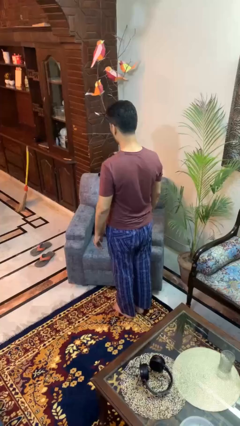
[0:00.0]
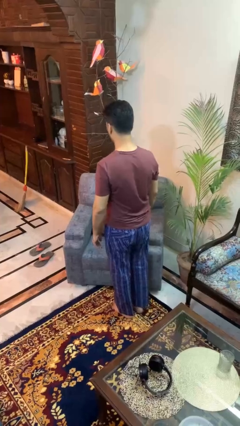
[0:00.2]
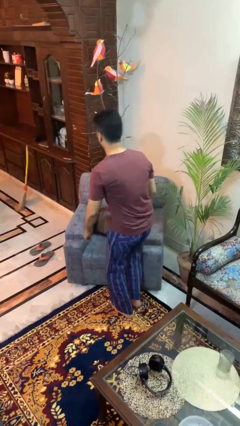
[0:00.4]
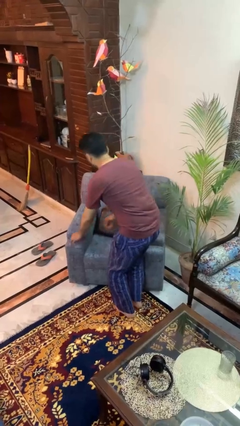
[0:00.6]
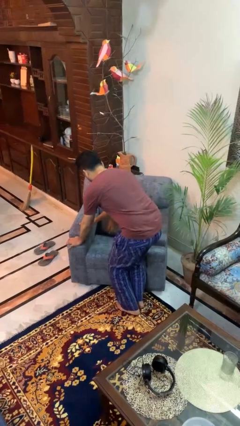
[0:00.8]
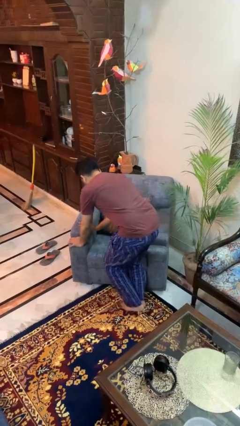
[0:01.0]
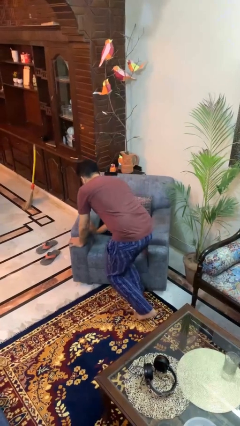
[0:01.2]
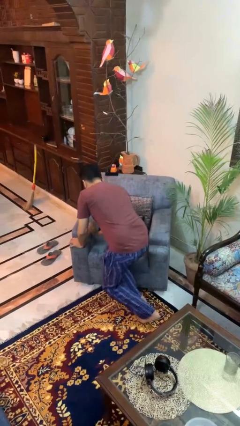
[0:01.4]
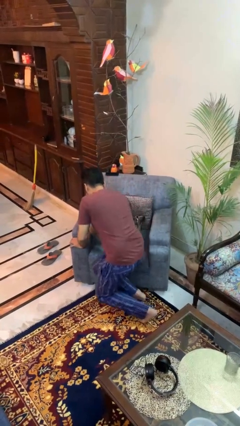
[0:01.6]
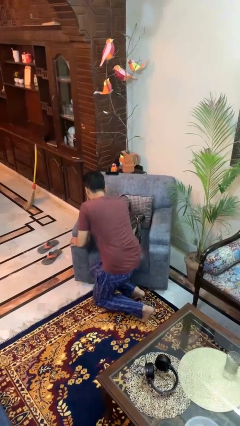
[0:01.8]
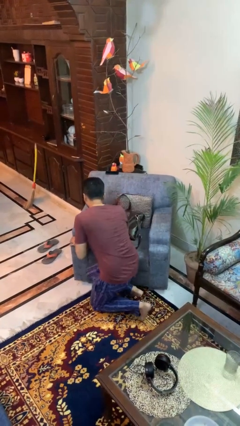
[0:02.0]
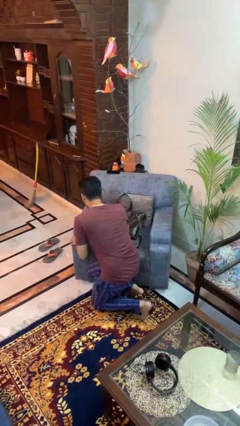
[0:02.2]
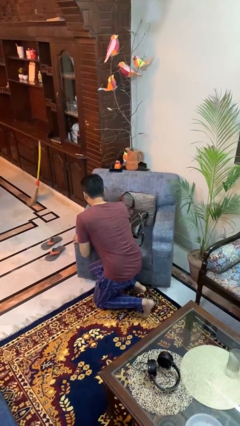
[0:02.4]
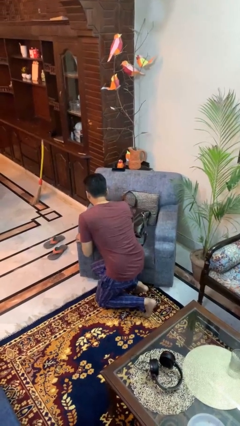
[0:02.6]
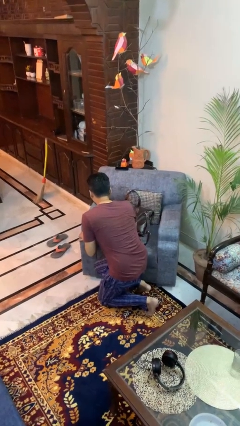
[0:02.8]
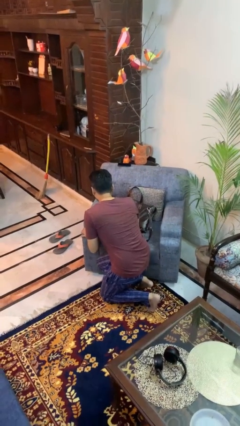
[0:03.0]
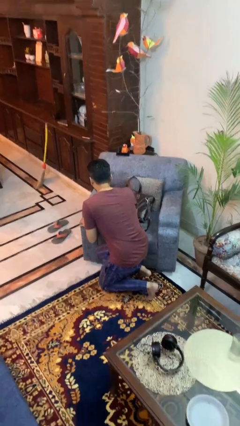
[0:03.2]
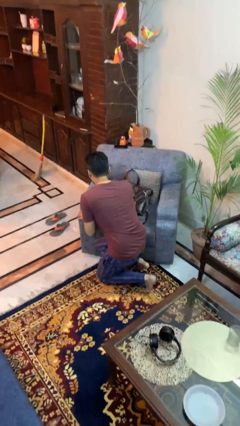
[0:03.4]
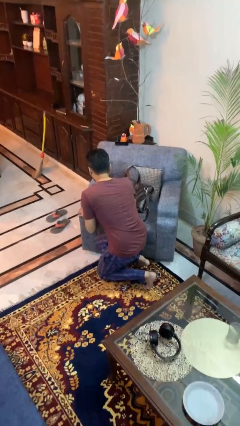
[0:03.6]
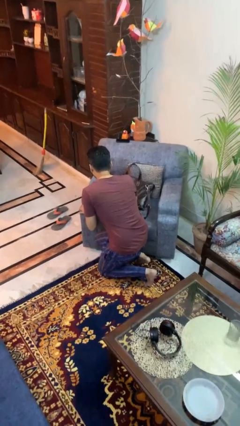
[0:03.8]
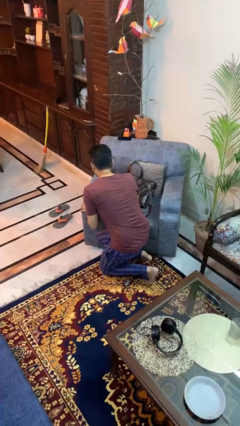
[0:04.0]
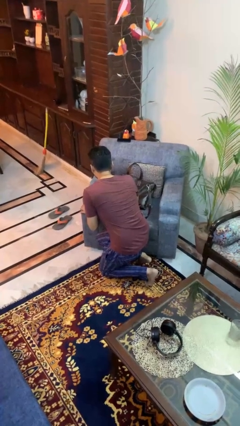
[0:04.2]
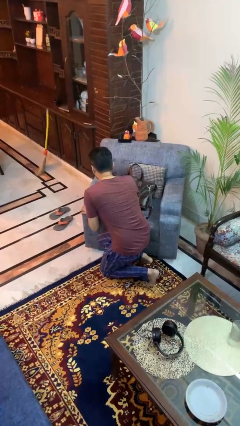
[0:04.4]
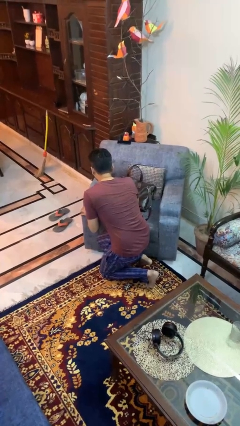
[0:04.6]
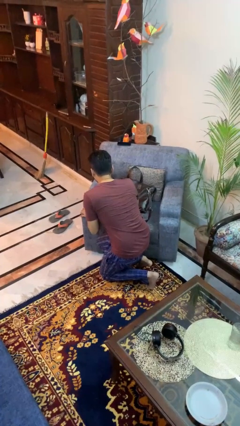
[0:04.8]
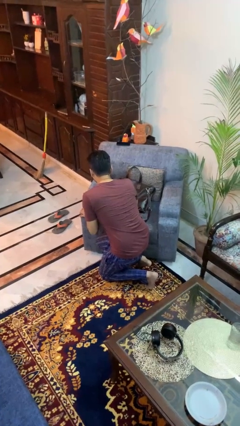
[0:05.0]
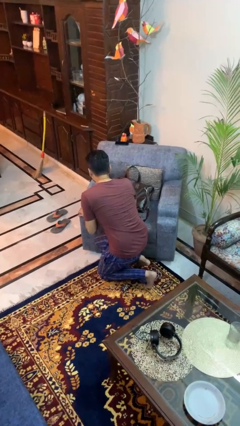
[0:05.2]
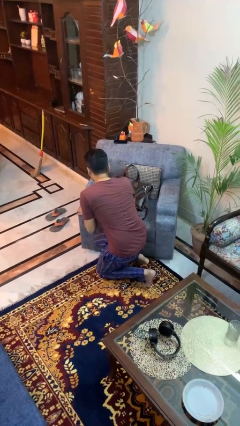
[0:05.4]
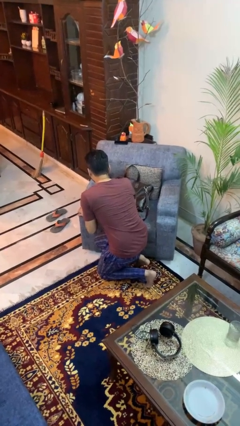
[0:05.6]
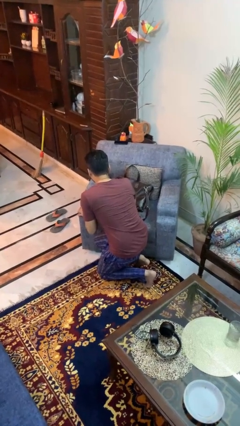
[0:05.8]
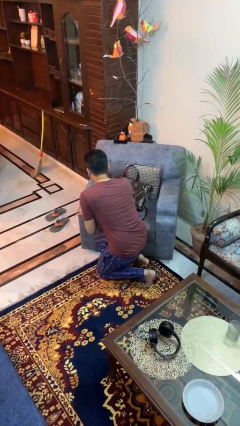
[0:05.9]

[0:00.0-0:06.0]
person trips on object on floor

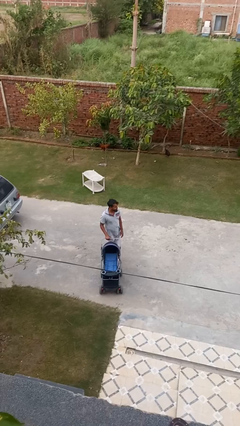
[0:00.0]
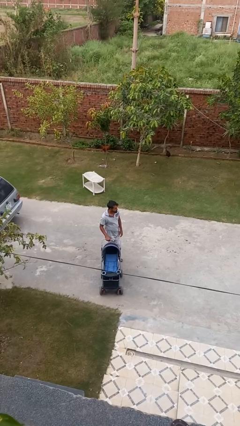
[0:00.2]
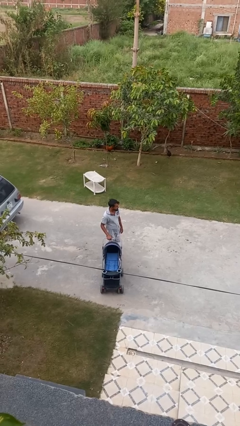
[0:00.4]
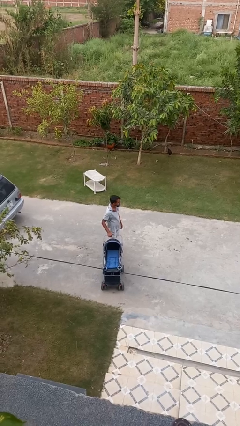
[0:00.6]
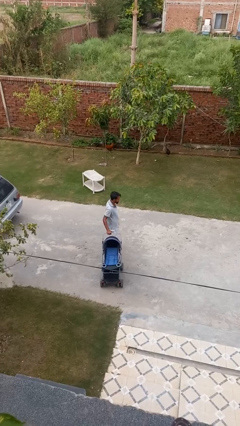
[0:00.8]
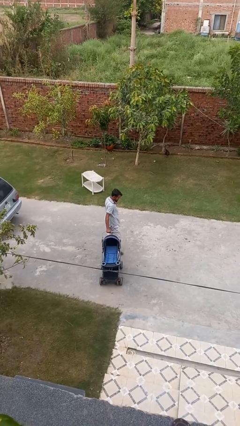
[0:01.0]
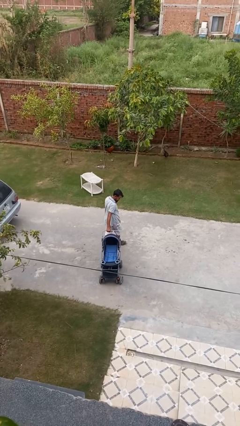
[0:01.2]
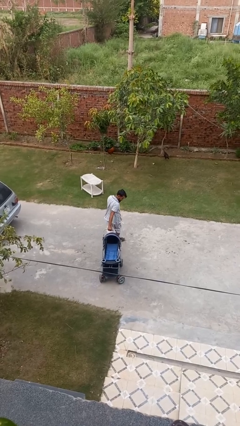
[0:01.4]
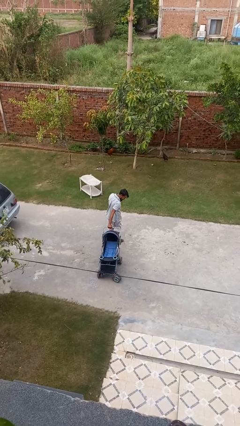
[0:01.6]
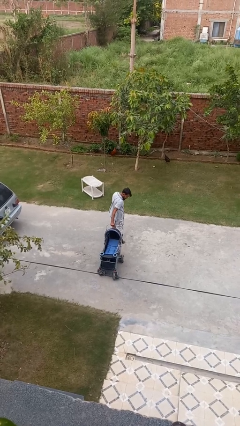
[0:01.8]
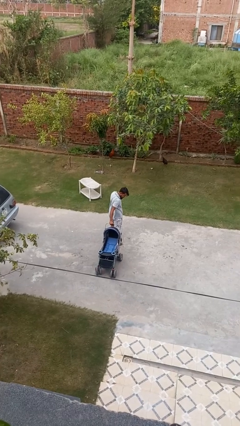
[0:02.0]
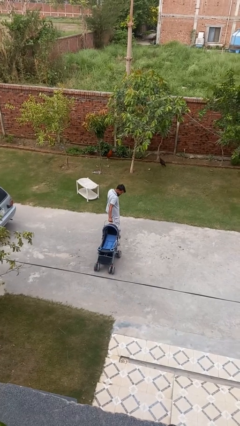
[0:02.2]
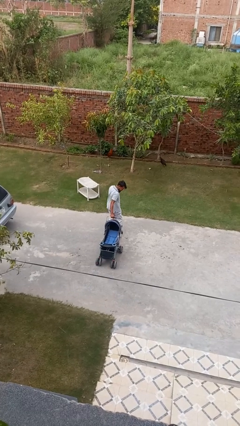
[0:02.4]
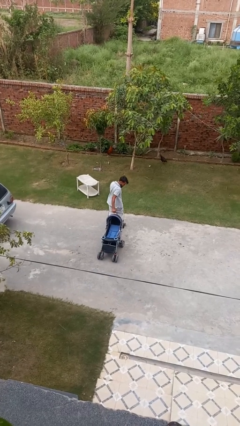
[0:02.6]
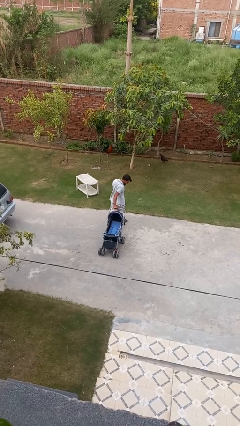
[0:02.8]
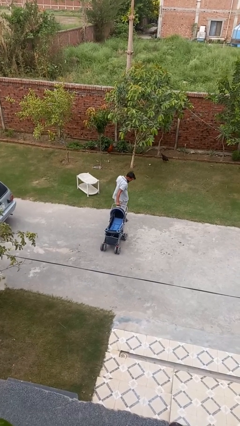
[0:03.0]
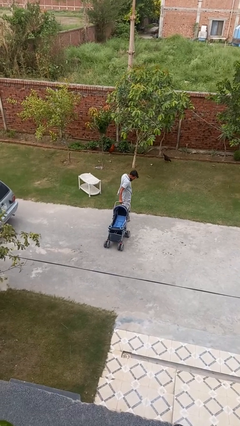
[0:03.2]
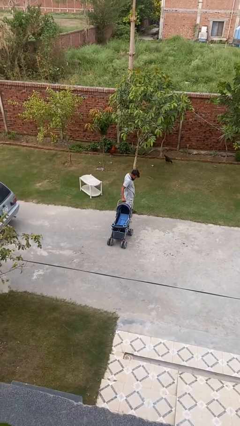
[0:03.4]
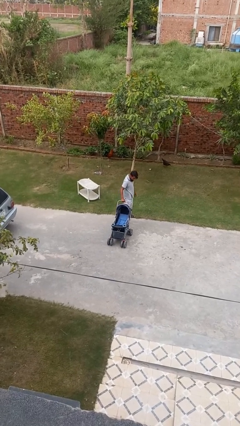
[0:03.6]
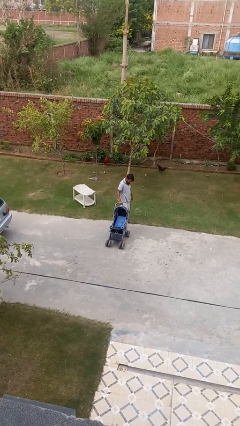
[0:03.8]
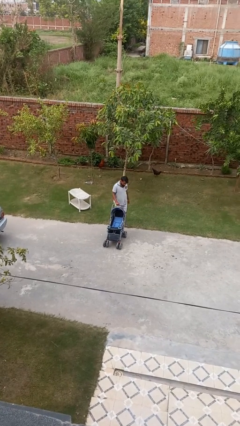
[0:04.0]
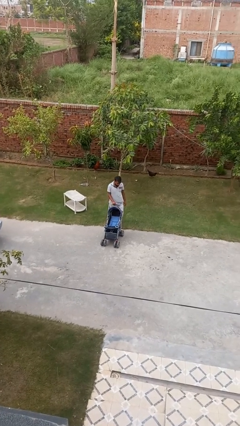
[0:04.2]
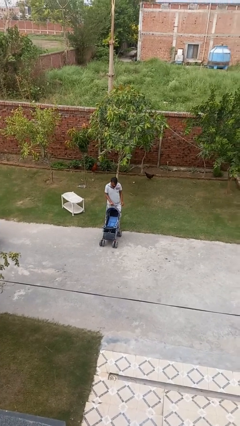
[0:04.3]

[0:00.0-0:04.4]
person pulls wheeled cart

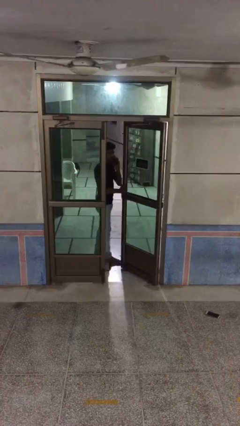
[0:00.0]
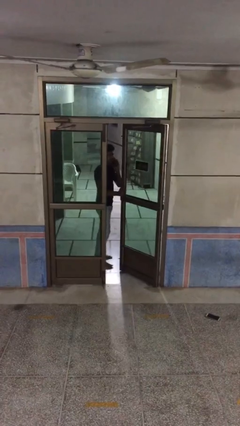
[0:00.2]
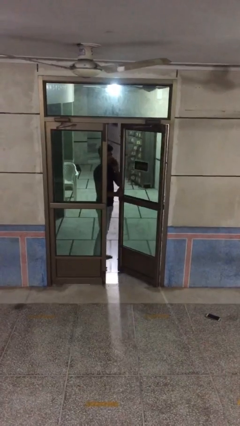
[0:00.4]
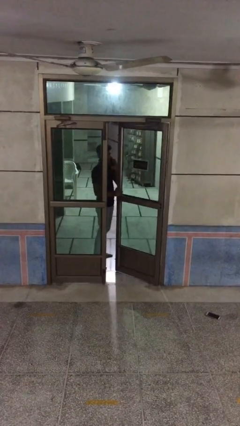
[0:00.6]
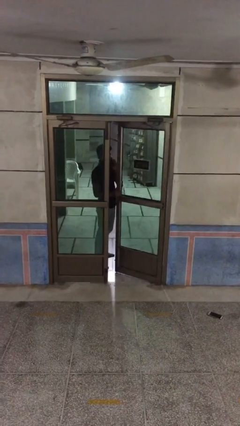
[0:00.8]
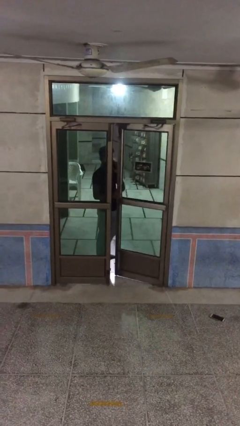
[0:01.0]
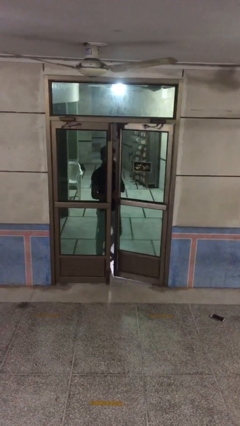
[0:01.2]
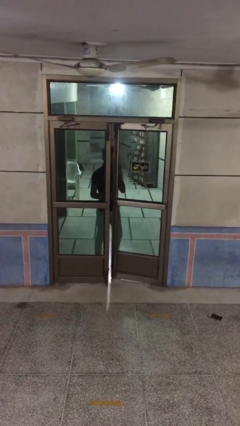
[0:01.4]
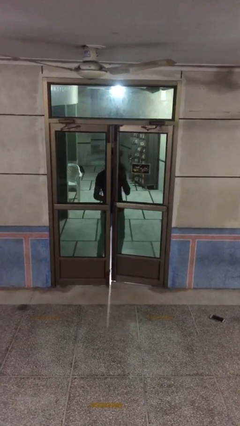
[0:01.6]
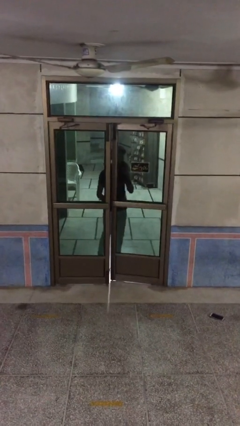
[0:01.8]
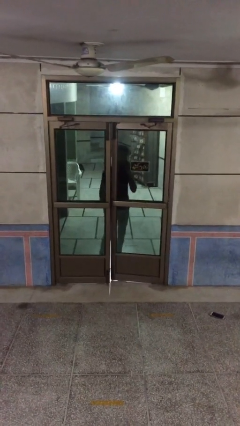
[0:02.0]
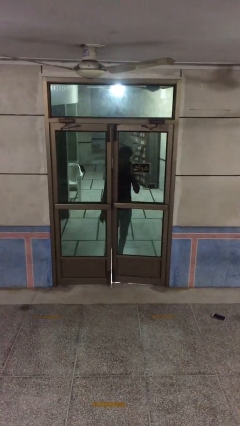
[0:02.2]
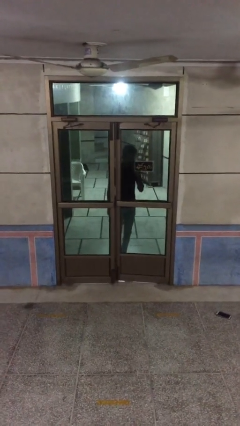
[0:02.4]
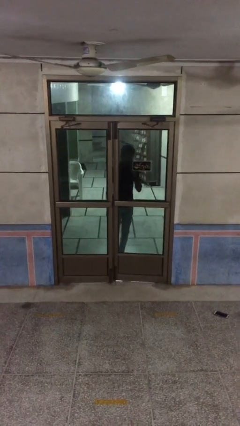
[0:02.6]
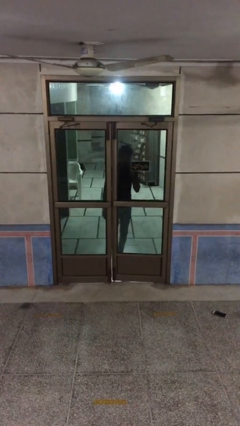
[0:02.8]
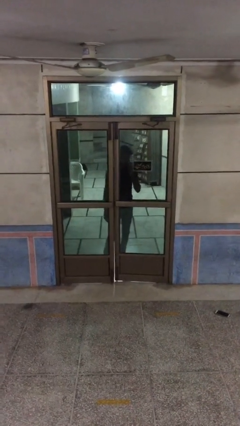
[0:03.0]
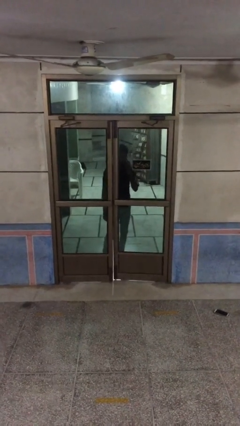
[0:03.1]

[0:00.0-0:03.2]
person closes facility door

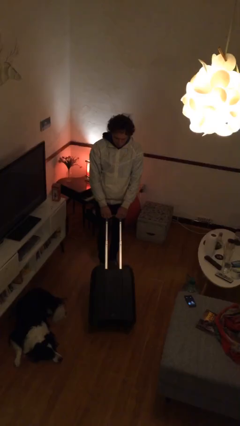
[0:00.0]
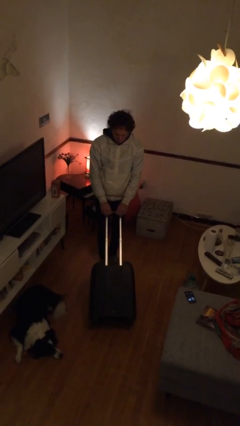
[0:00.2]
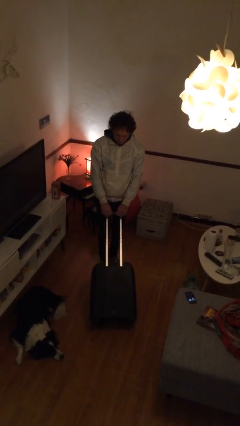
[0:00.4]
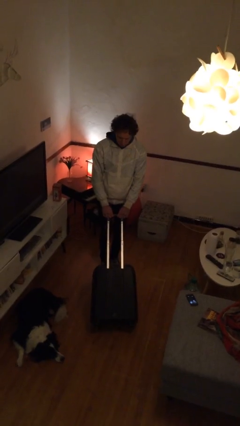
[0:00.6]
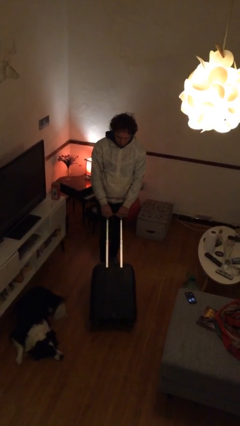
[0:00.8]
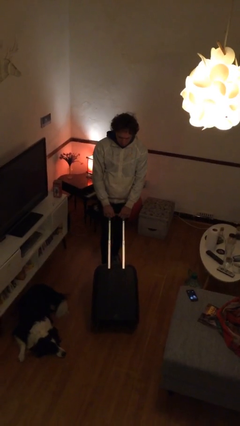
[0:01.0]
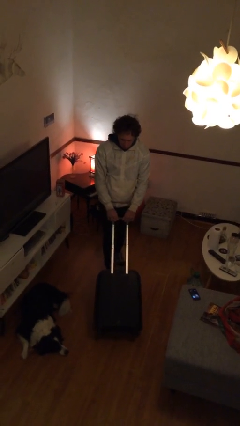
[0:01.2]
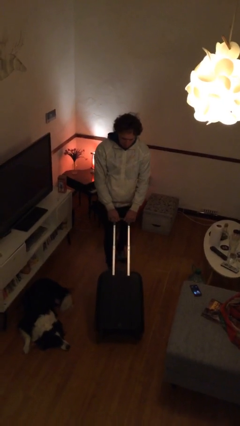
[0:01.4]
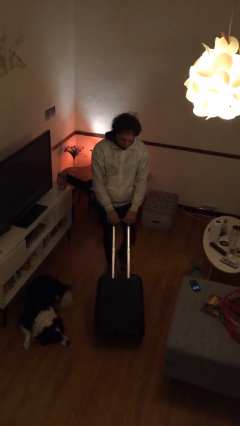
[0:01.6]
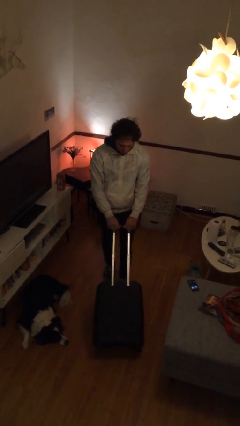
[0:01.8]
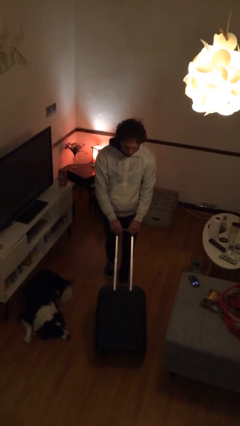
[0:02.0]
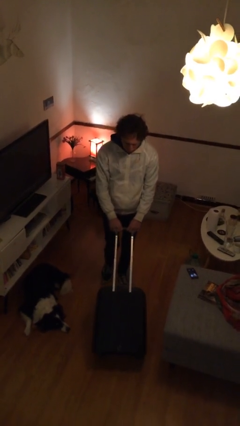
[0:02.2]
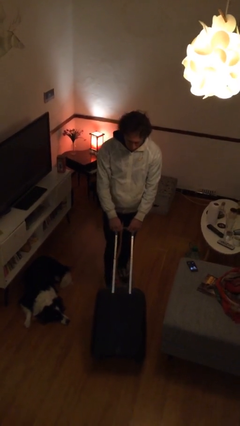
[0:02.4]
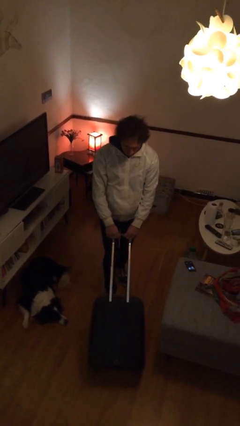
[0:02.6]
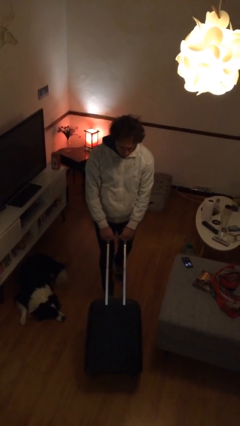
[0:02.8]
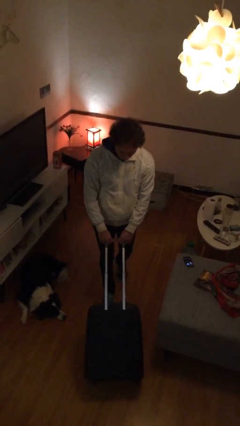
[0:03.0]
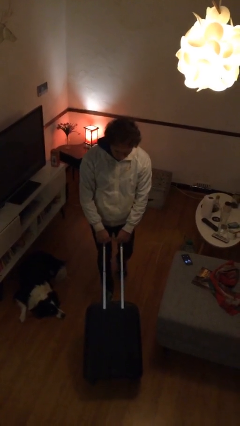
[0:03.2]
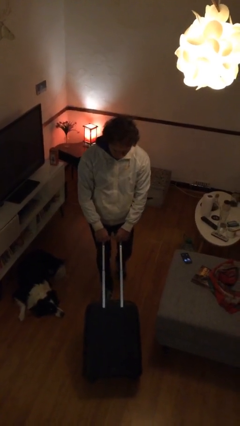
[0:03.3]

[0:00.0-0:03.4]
person pushes wheeled cart

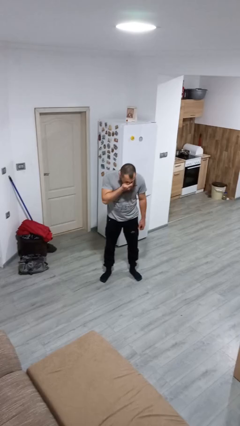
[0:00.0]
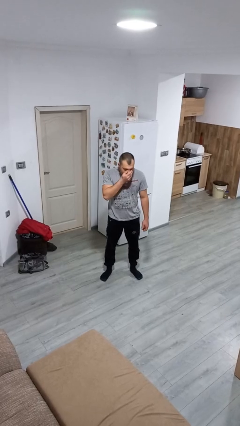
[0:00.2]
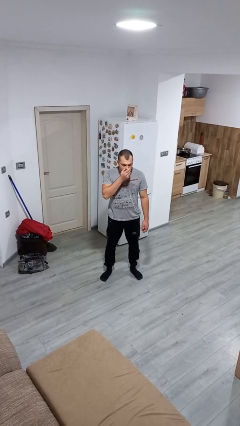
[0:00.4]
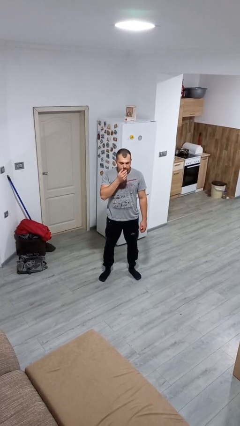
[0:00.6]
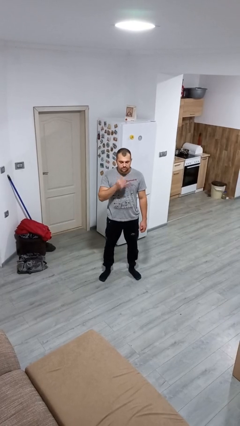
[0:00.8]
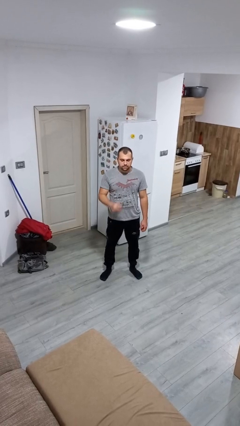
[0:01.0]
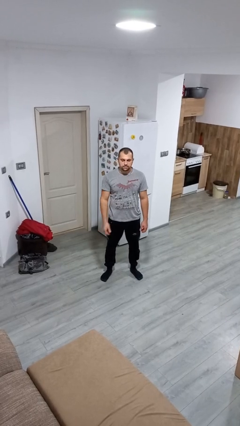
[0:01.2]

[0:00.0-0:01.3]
person sneezes into hand
